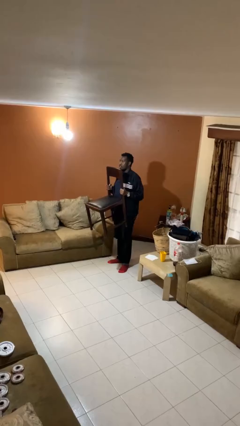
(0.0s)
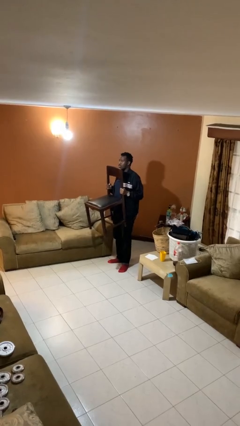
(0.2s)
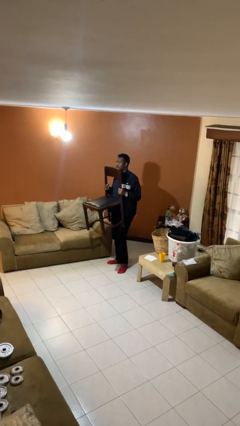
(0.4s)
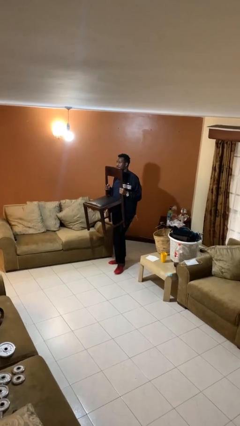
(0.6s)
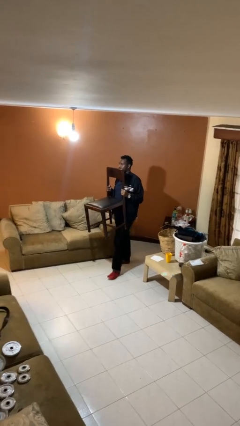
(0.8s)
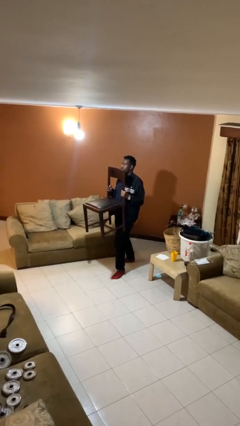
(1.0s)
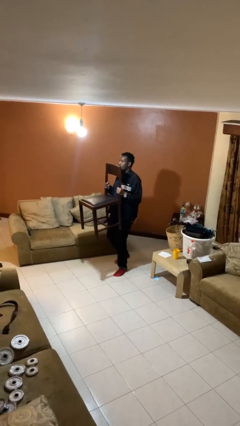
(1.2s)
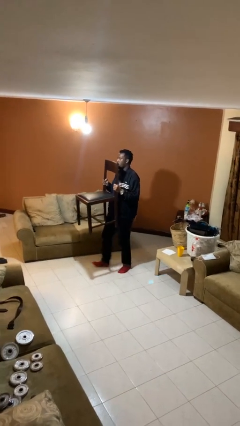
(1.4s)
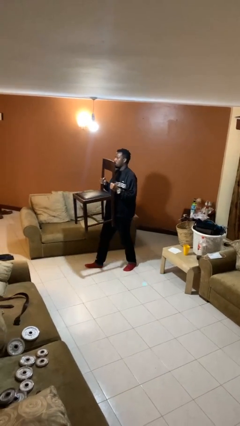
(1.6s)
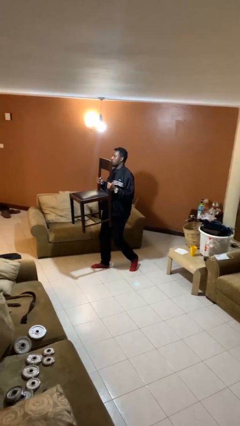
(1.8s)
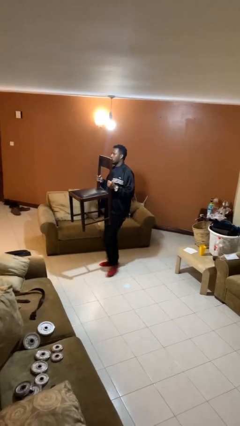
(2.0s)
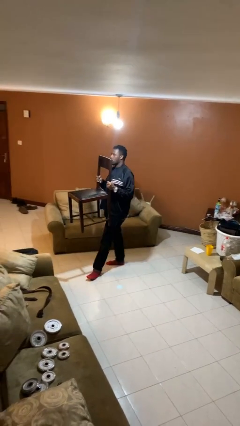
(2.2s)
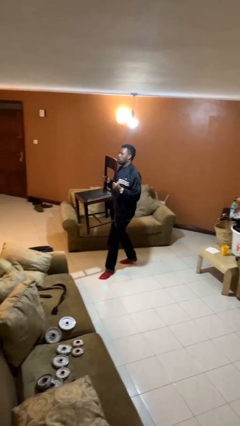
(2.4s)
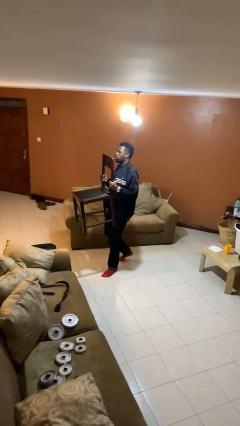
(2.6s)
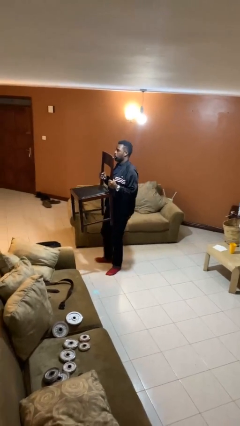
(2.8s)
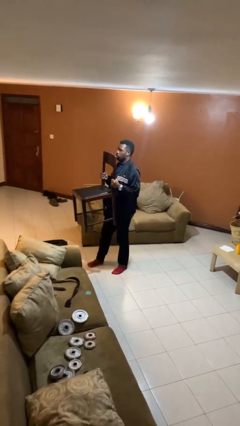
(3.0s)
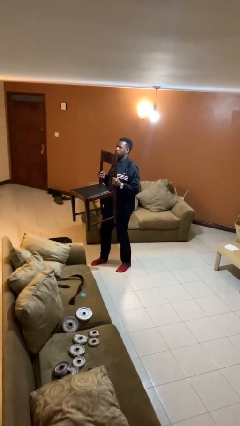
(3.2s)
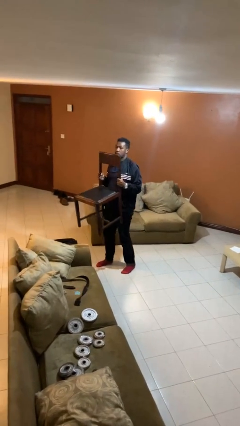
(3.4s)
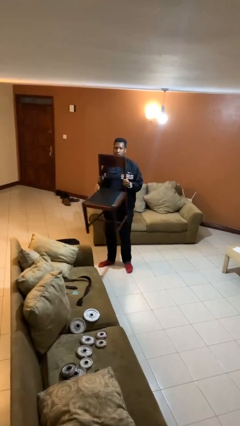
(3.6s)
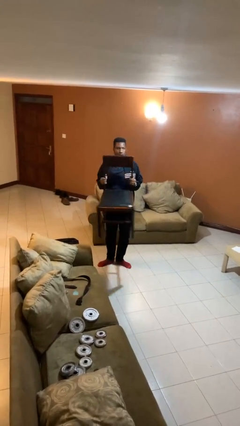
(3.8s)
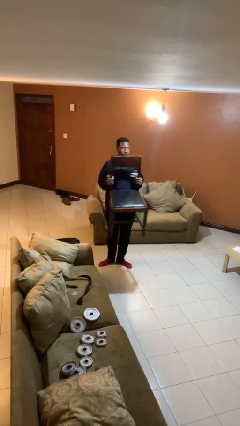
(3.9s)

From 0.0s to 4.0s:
person carries furniture

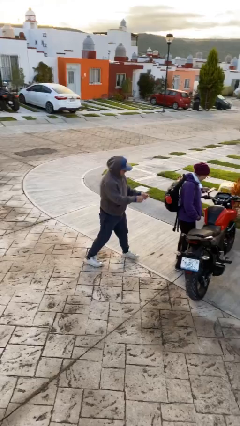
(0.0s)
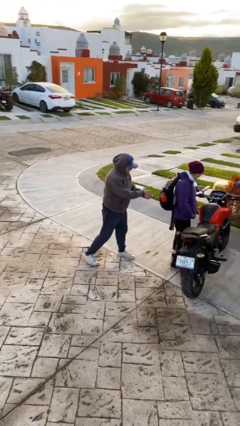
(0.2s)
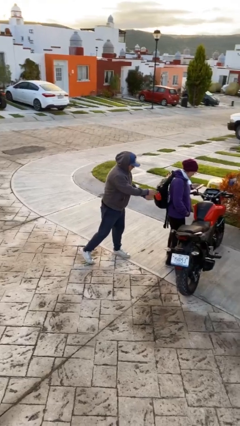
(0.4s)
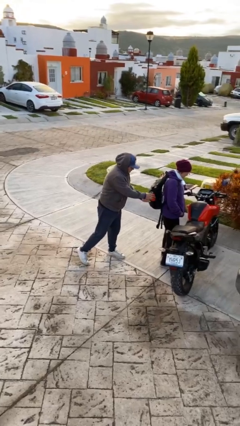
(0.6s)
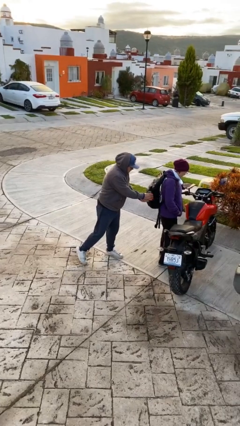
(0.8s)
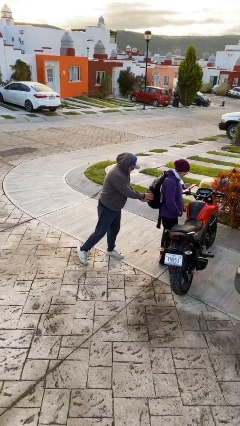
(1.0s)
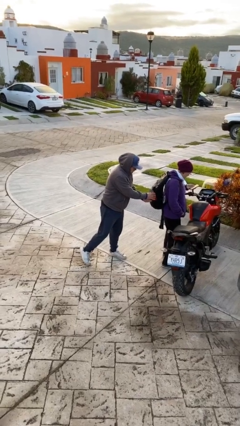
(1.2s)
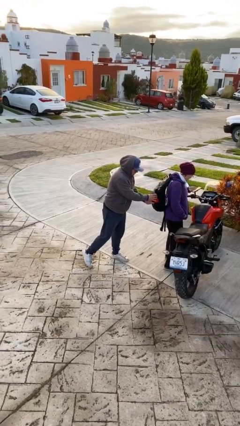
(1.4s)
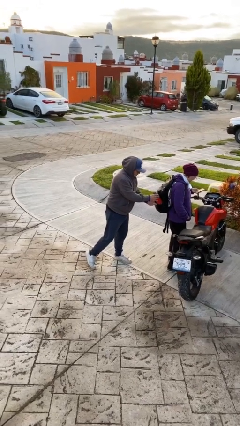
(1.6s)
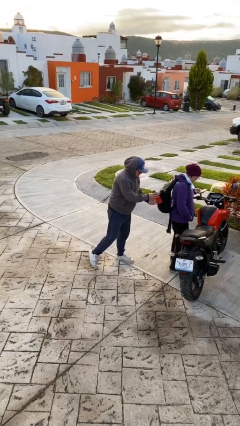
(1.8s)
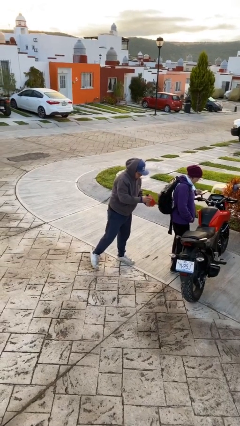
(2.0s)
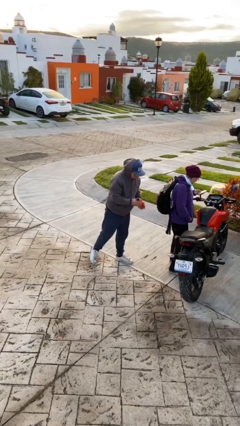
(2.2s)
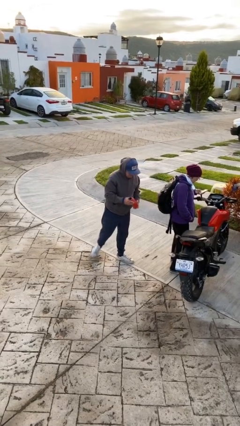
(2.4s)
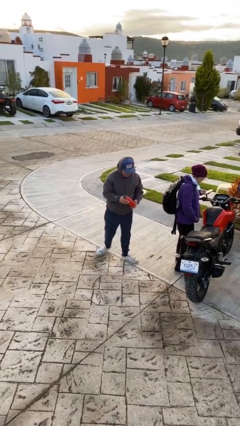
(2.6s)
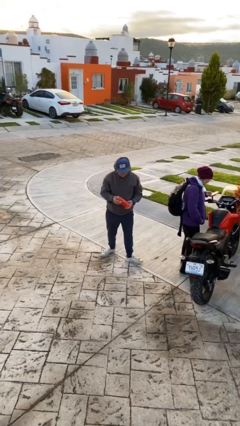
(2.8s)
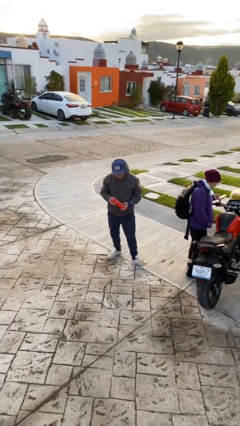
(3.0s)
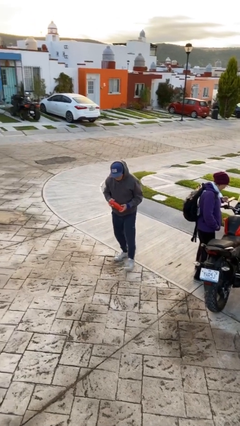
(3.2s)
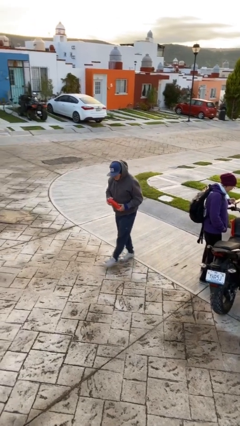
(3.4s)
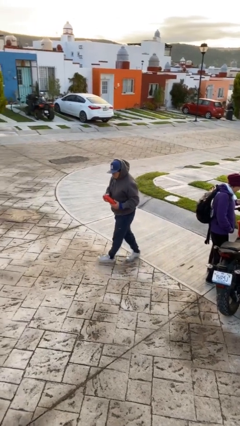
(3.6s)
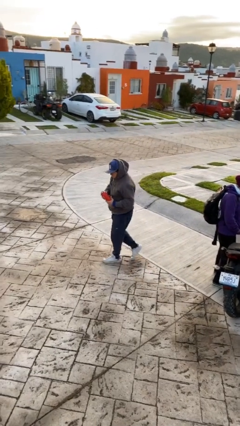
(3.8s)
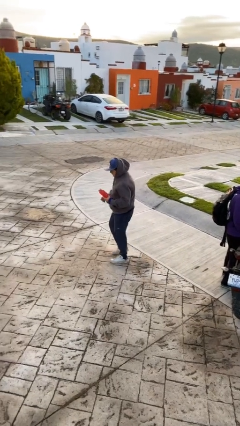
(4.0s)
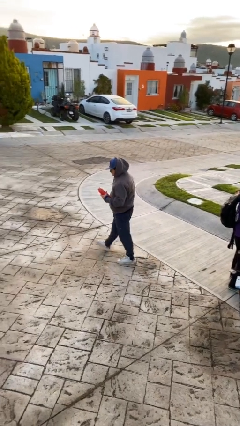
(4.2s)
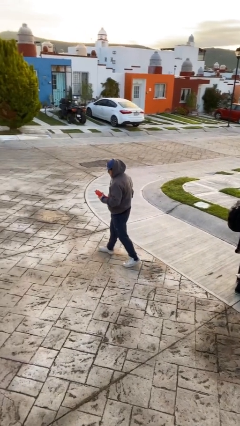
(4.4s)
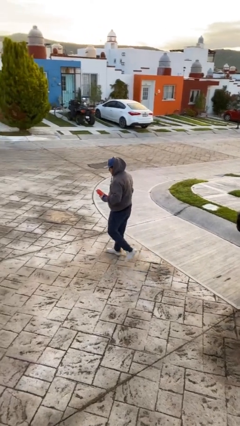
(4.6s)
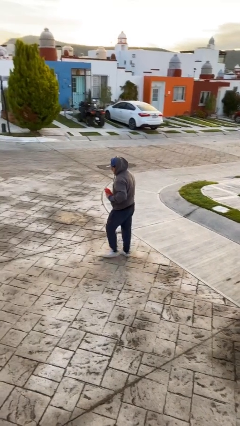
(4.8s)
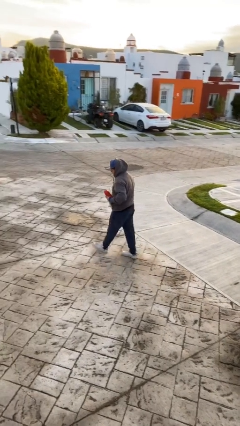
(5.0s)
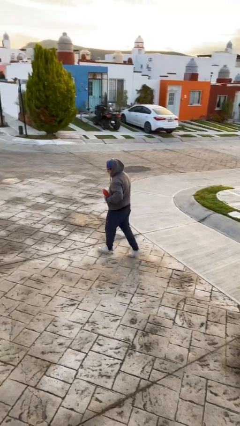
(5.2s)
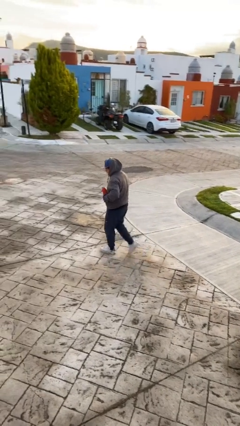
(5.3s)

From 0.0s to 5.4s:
person steals object from person

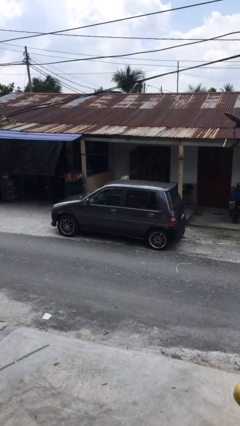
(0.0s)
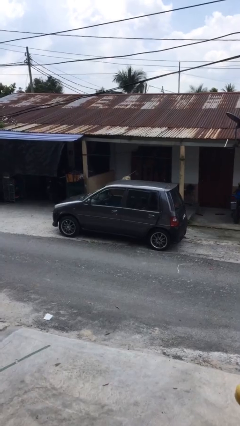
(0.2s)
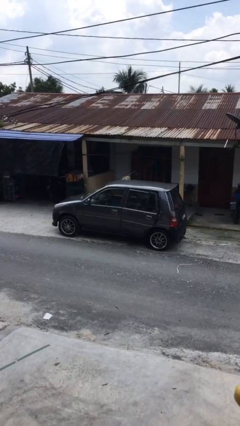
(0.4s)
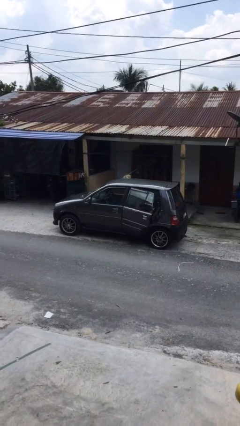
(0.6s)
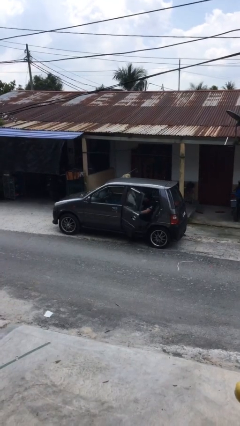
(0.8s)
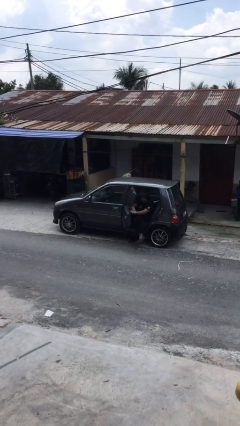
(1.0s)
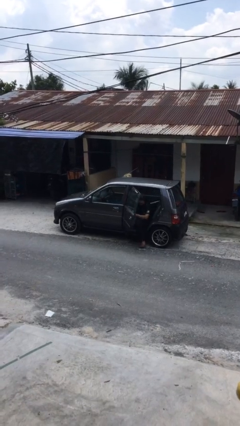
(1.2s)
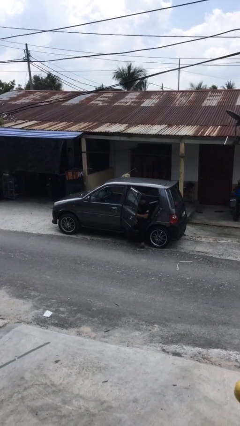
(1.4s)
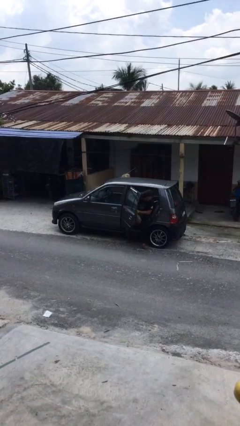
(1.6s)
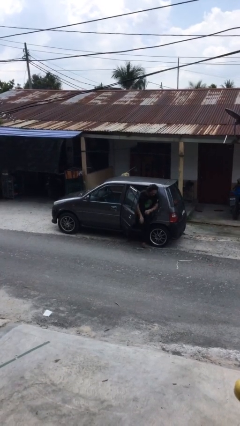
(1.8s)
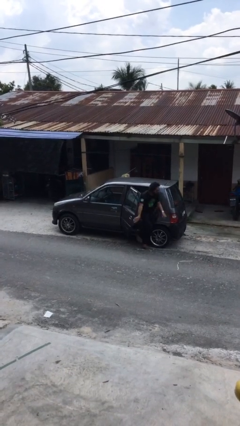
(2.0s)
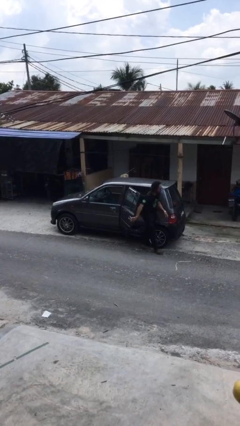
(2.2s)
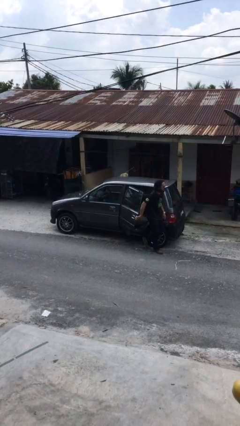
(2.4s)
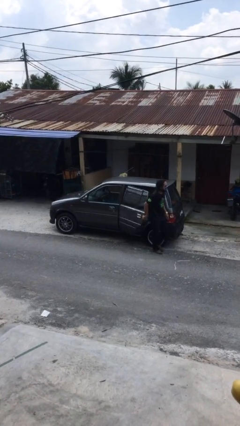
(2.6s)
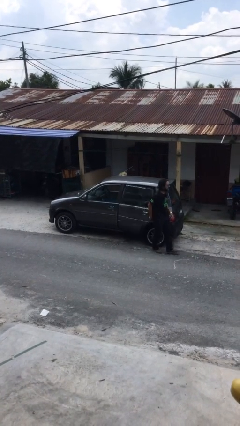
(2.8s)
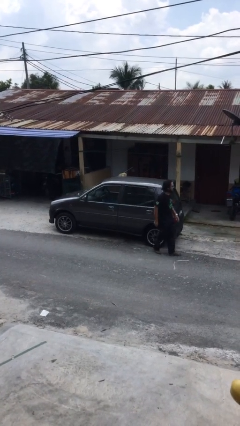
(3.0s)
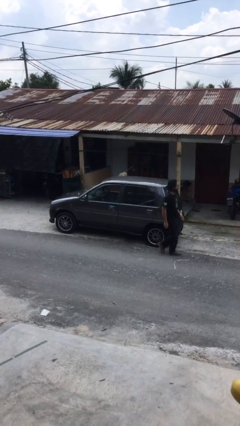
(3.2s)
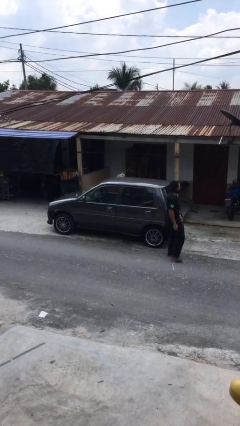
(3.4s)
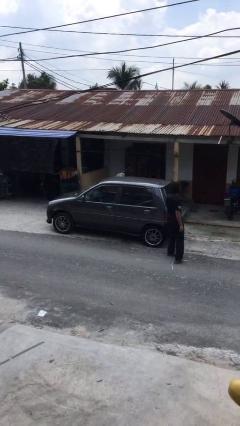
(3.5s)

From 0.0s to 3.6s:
car drops off person

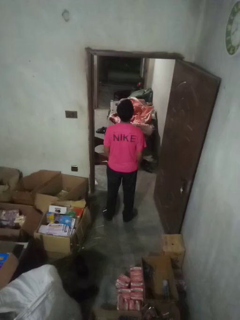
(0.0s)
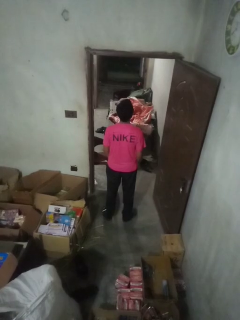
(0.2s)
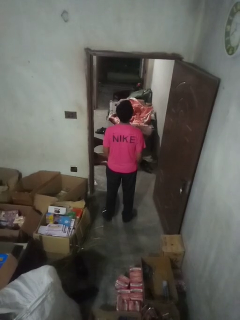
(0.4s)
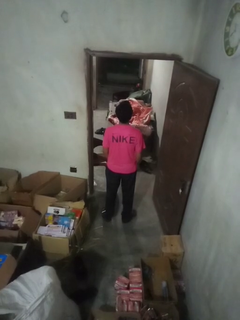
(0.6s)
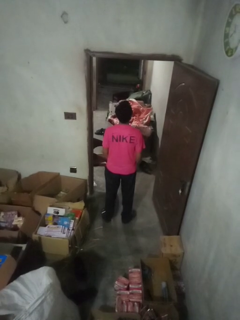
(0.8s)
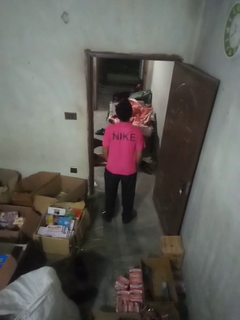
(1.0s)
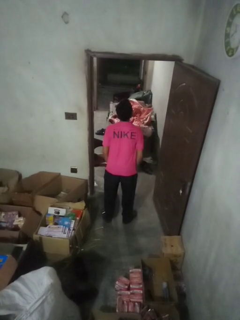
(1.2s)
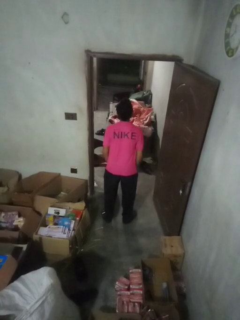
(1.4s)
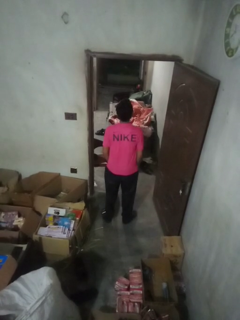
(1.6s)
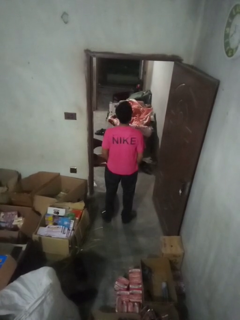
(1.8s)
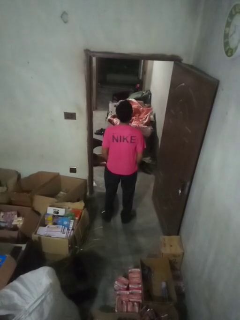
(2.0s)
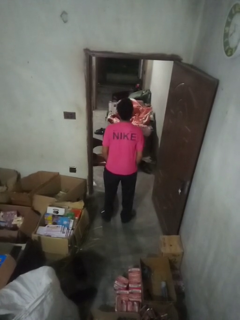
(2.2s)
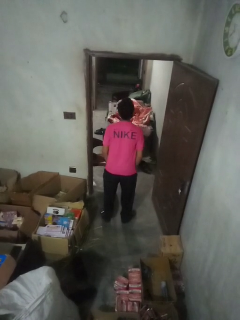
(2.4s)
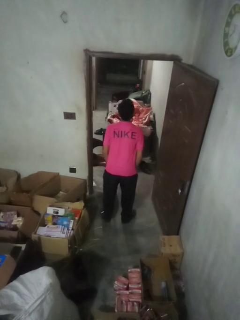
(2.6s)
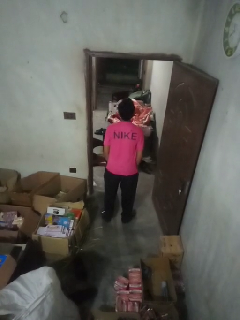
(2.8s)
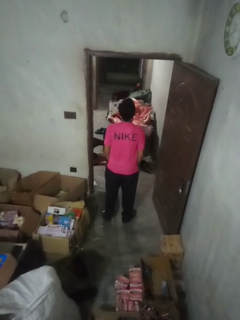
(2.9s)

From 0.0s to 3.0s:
person wiggles hips

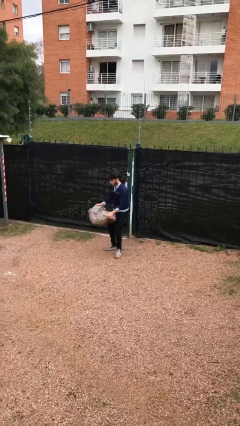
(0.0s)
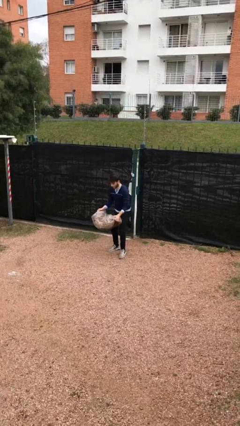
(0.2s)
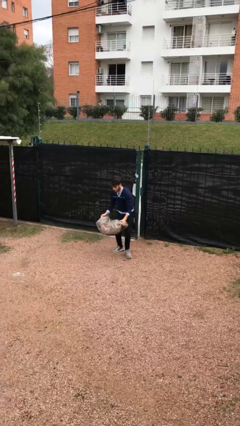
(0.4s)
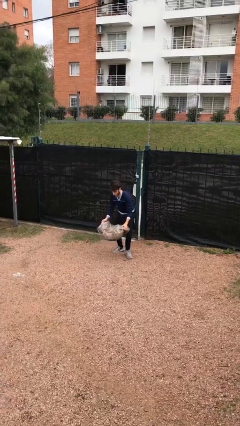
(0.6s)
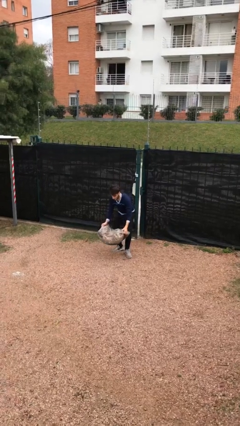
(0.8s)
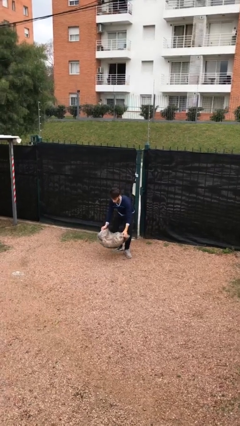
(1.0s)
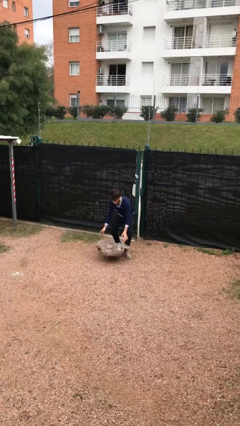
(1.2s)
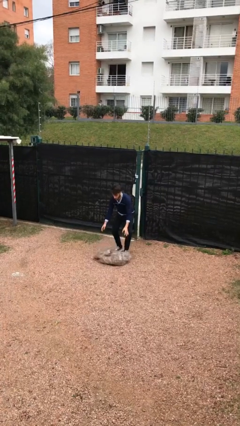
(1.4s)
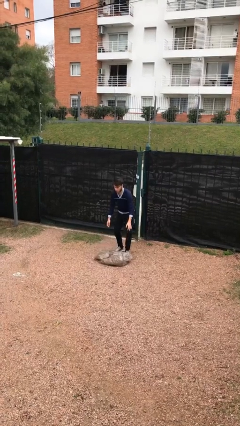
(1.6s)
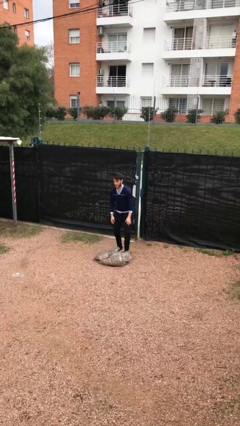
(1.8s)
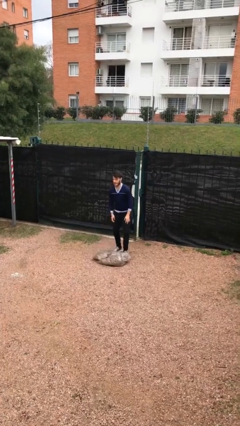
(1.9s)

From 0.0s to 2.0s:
person puts down object on floor
